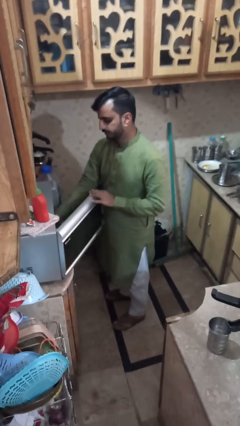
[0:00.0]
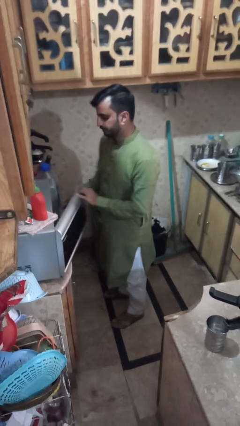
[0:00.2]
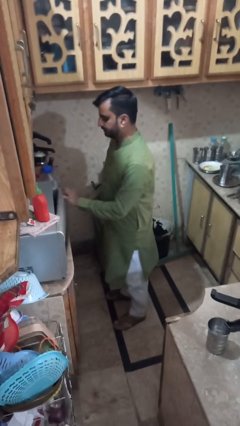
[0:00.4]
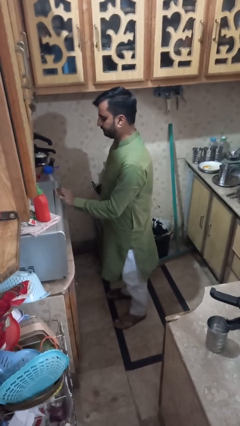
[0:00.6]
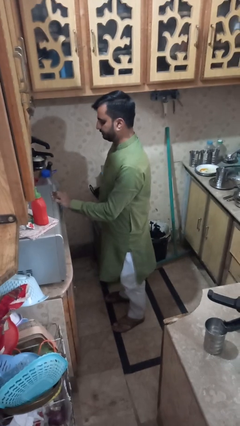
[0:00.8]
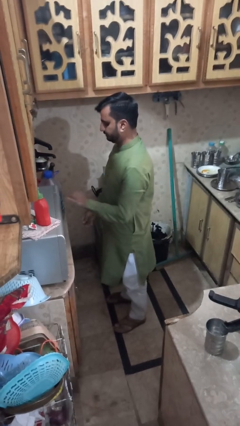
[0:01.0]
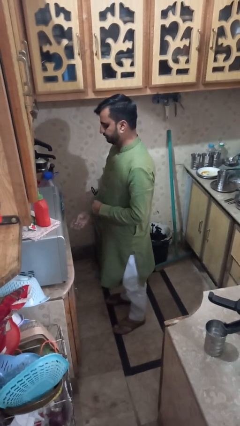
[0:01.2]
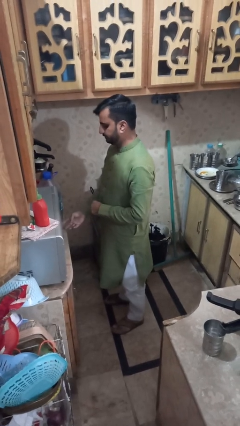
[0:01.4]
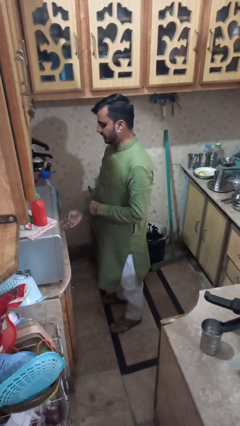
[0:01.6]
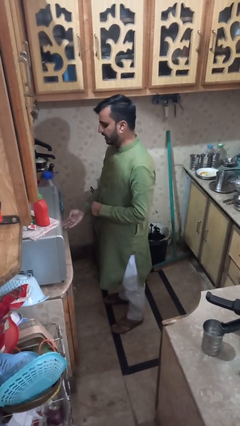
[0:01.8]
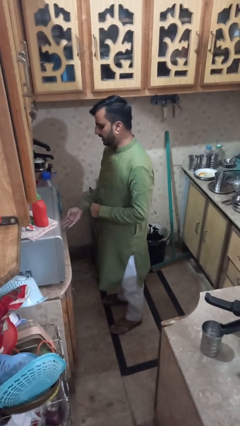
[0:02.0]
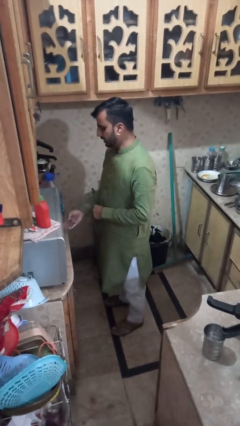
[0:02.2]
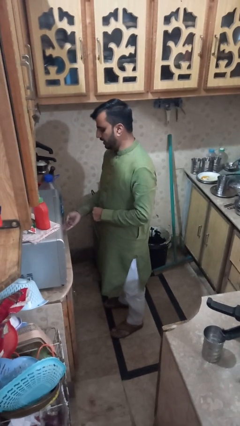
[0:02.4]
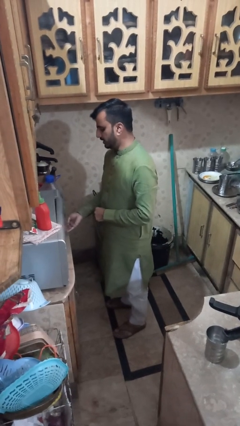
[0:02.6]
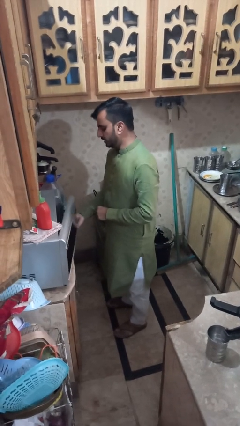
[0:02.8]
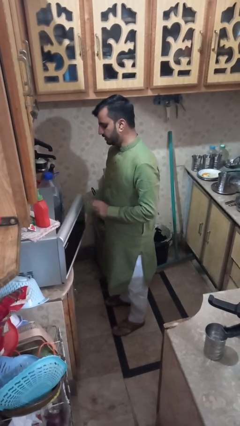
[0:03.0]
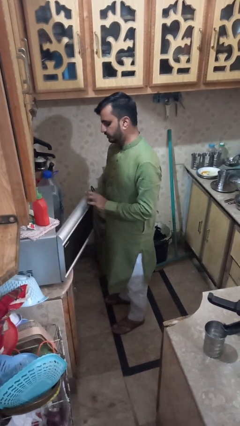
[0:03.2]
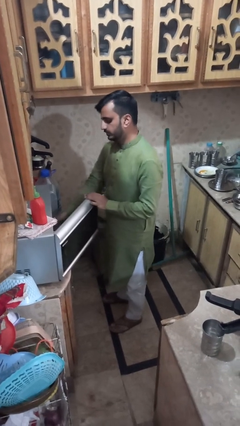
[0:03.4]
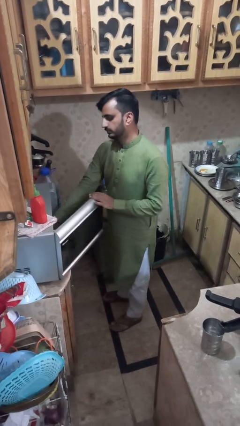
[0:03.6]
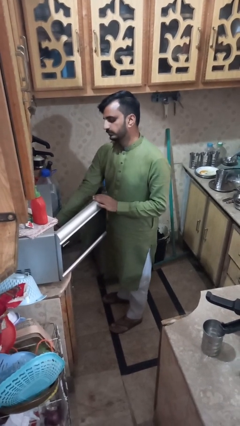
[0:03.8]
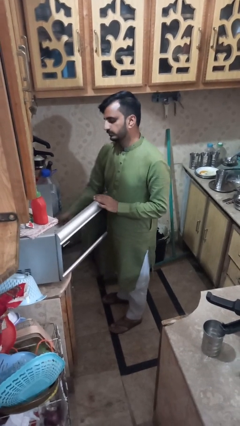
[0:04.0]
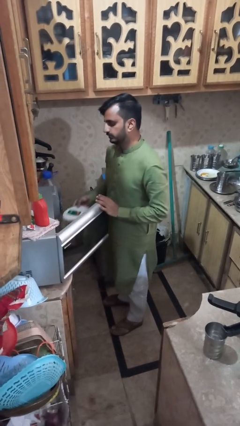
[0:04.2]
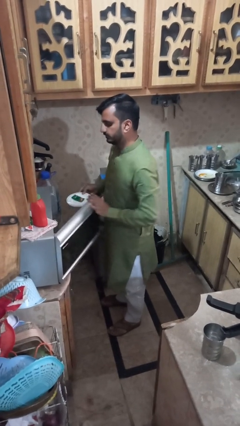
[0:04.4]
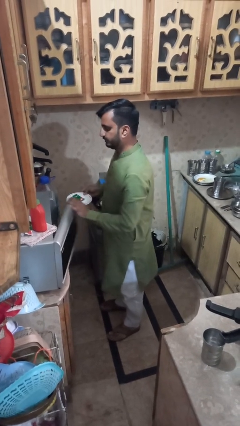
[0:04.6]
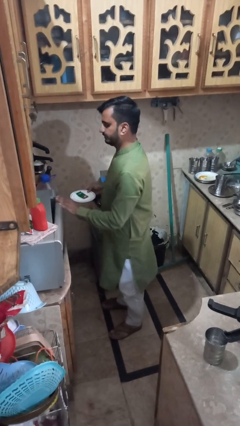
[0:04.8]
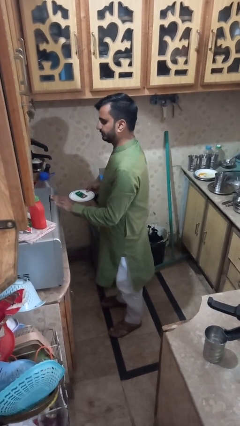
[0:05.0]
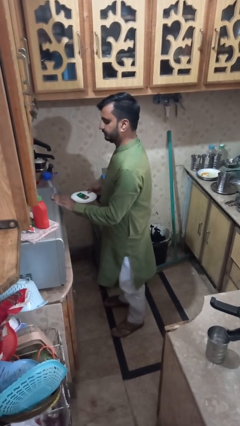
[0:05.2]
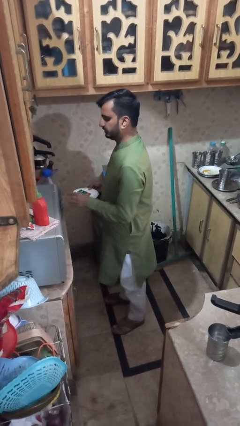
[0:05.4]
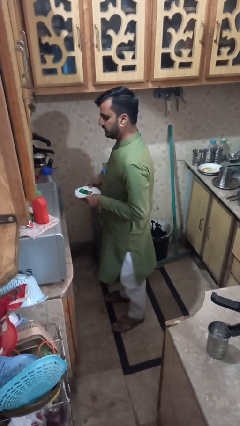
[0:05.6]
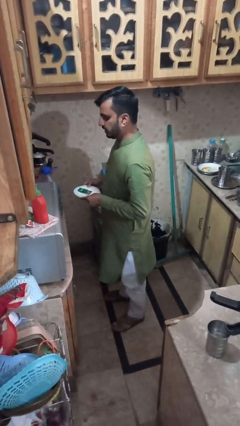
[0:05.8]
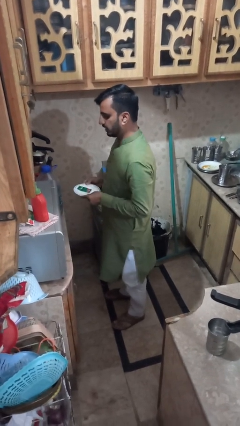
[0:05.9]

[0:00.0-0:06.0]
person takes object from microwave

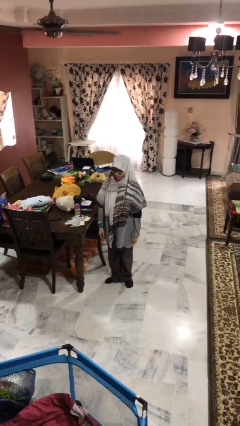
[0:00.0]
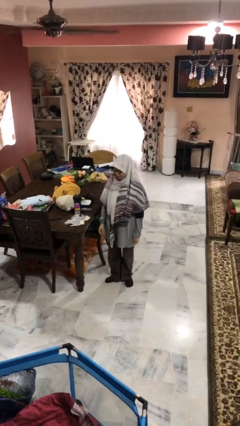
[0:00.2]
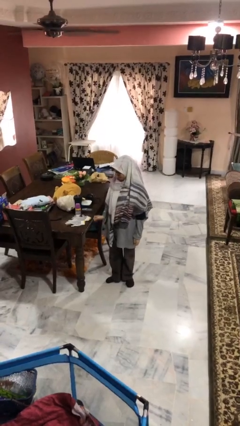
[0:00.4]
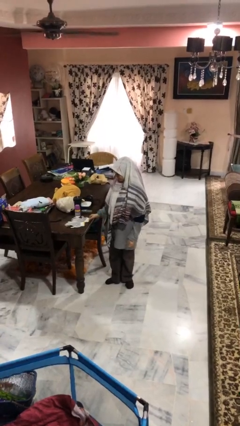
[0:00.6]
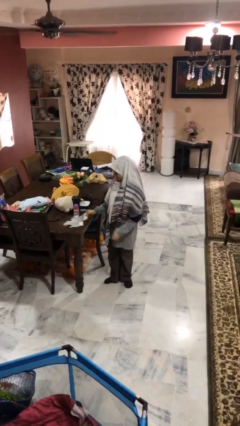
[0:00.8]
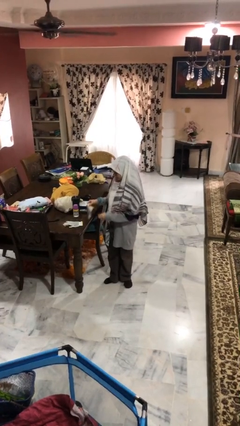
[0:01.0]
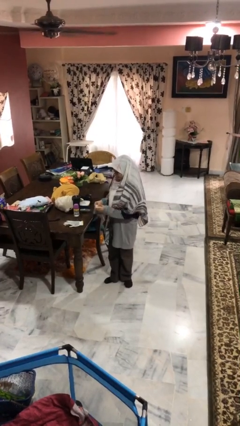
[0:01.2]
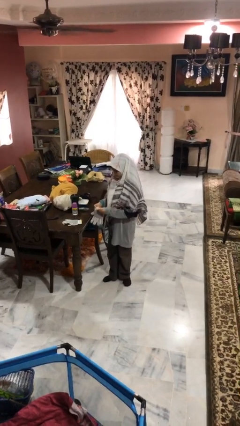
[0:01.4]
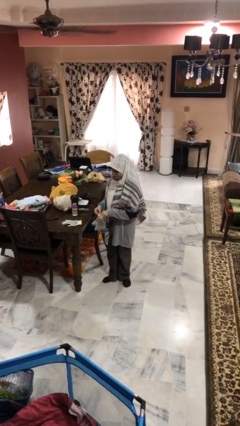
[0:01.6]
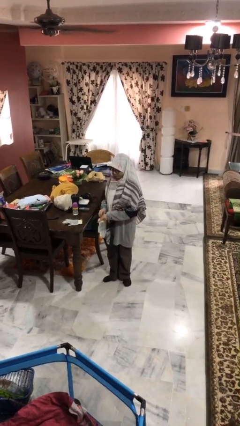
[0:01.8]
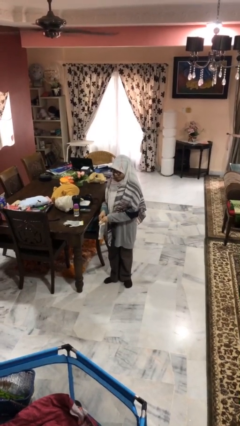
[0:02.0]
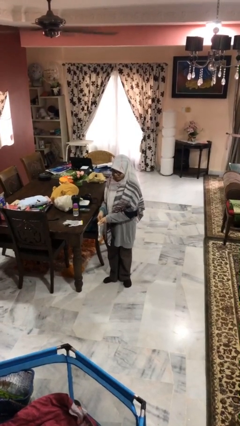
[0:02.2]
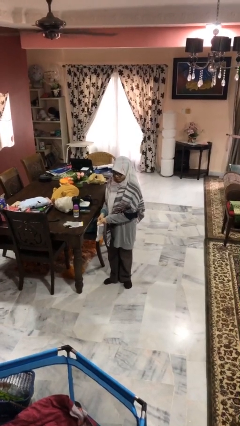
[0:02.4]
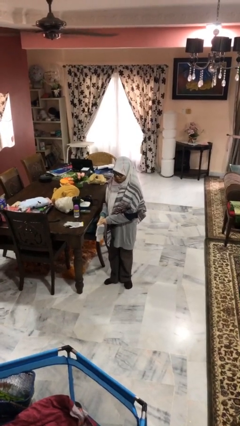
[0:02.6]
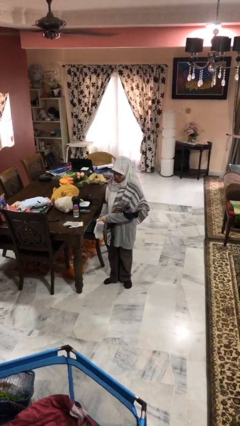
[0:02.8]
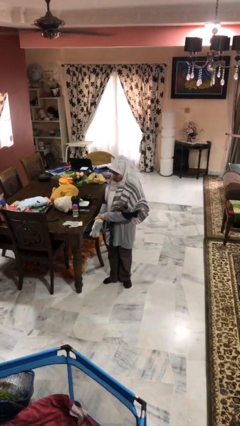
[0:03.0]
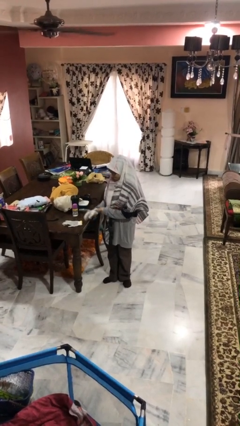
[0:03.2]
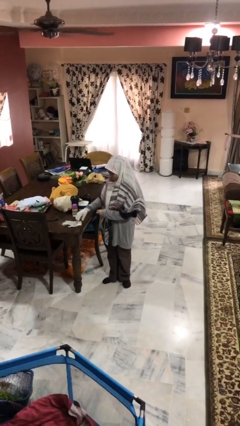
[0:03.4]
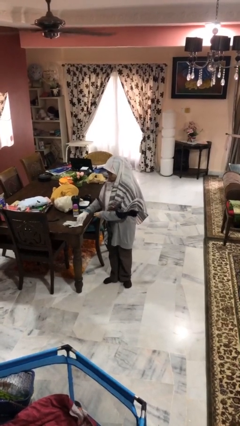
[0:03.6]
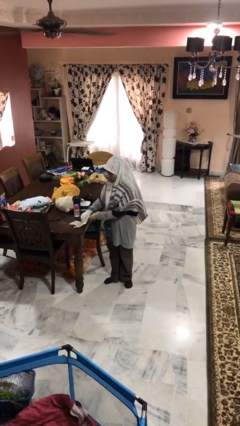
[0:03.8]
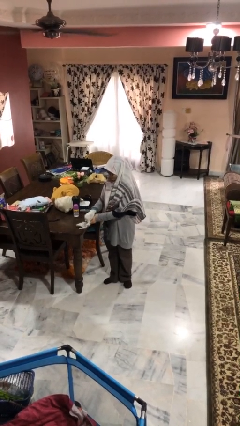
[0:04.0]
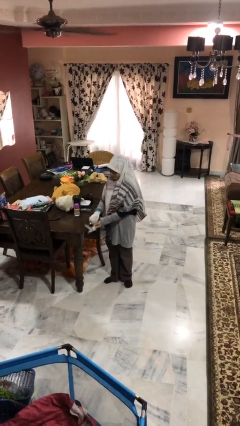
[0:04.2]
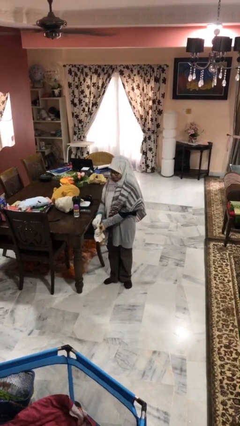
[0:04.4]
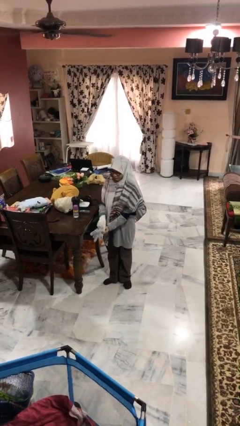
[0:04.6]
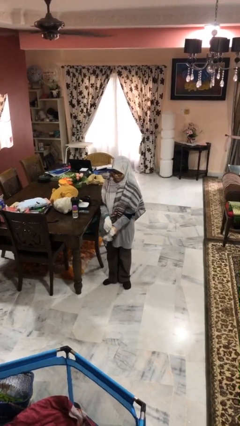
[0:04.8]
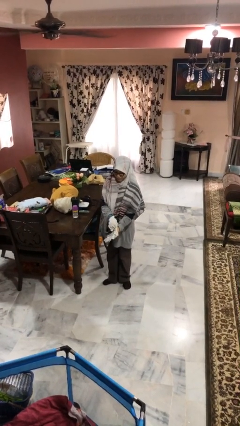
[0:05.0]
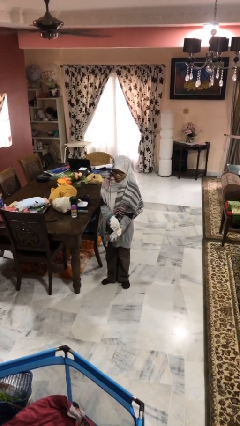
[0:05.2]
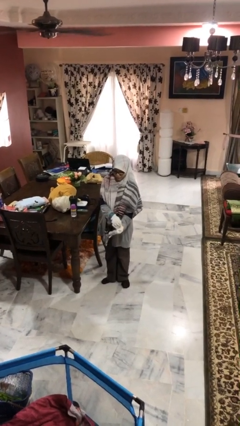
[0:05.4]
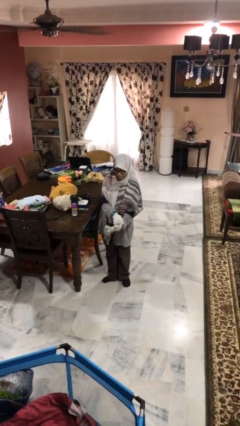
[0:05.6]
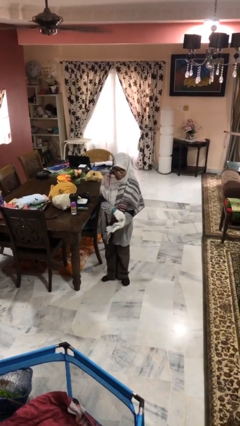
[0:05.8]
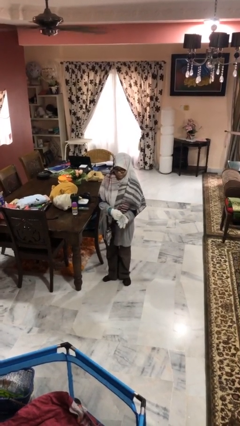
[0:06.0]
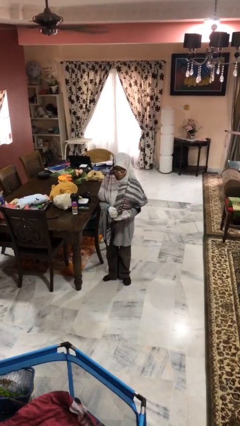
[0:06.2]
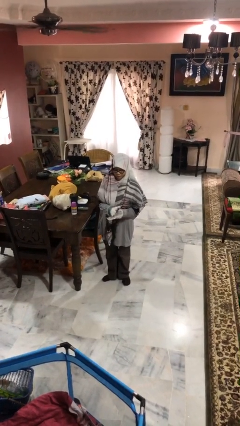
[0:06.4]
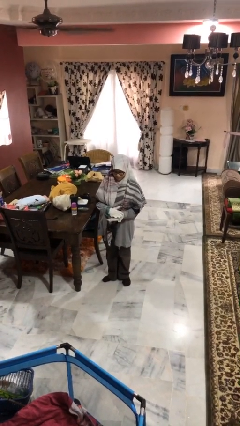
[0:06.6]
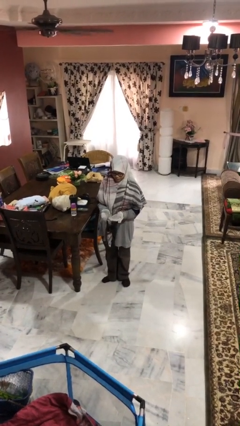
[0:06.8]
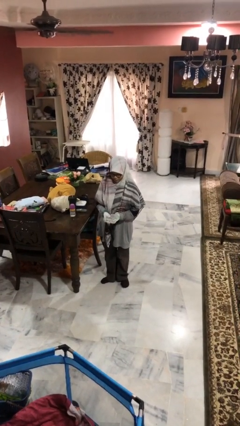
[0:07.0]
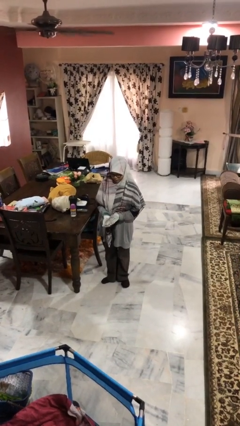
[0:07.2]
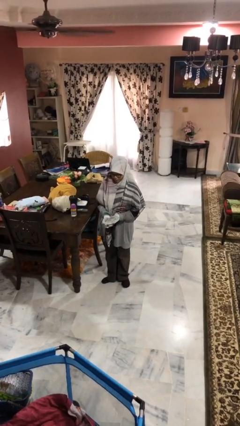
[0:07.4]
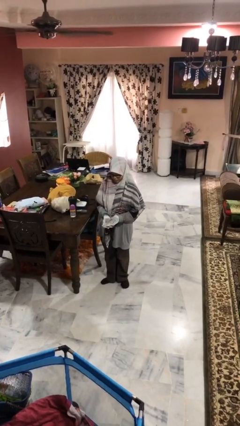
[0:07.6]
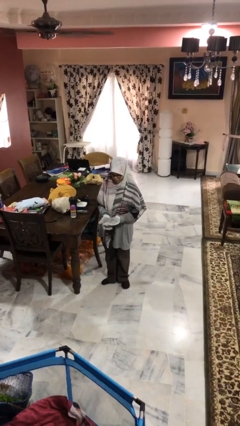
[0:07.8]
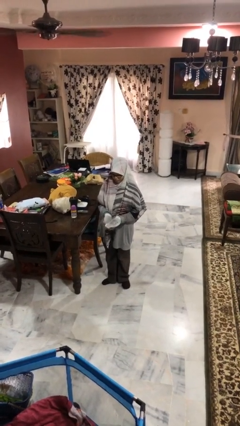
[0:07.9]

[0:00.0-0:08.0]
person puts on gloves

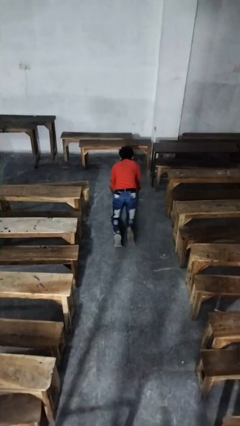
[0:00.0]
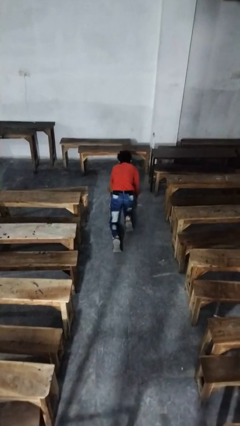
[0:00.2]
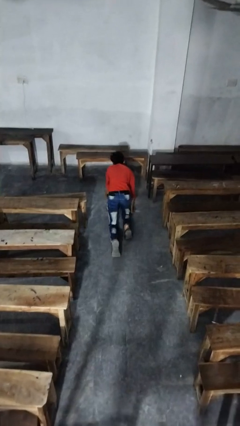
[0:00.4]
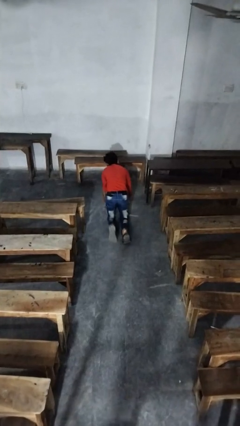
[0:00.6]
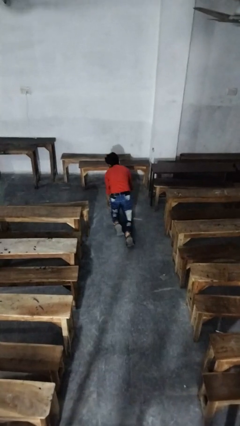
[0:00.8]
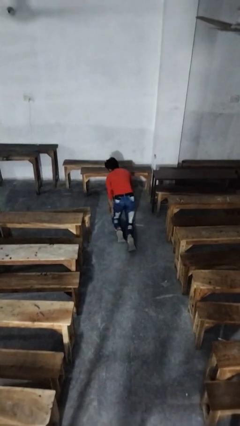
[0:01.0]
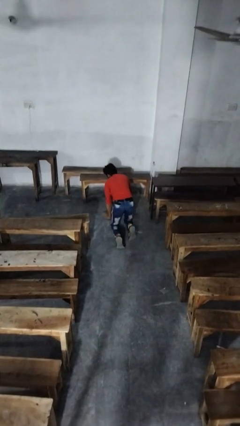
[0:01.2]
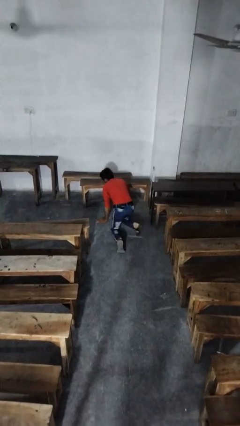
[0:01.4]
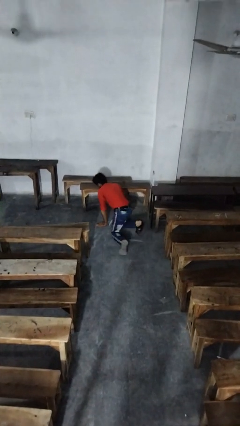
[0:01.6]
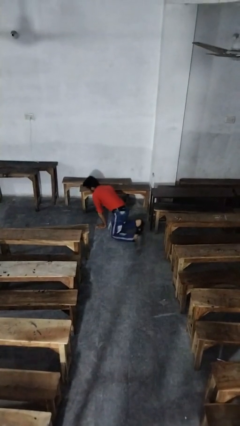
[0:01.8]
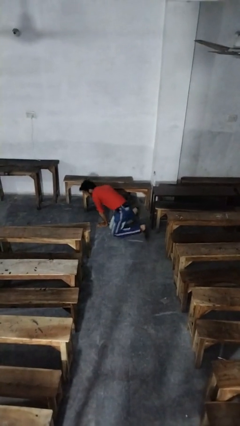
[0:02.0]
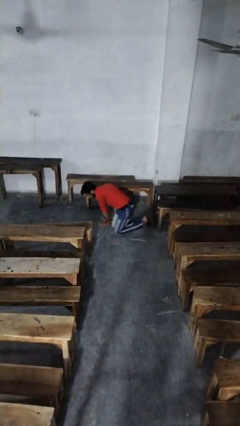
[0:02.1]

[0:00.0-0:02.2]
person crawls

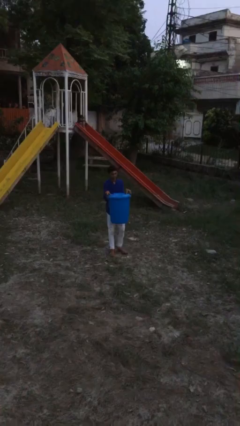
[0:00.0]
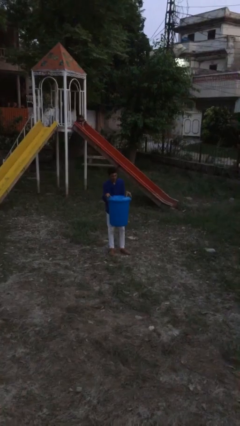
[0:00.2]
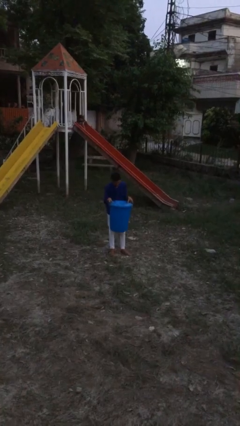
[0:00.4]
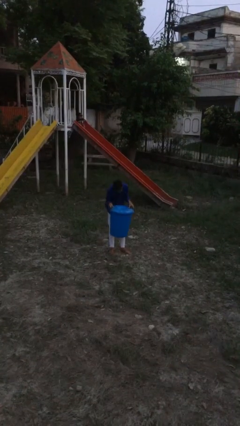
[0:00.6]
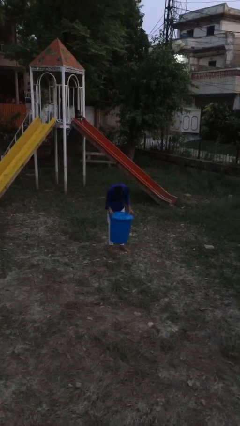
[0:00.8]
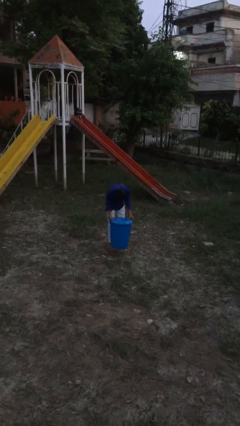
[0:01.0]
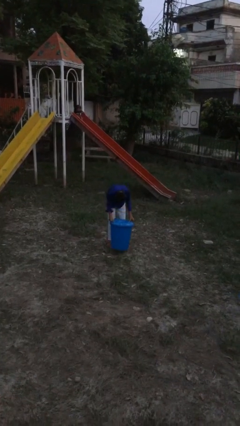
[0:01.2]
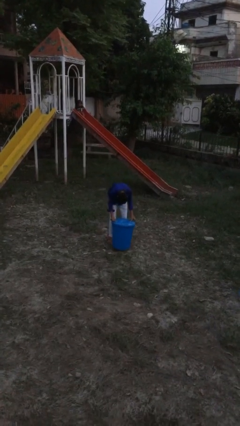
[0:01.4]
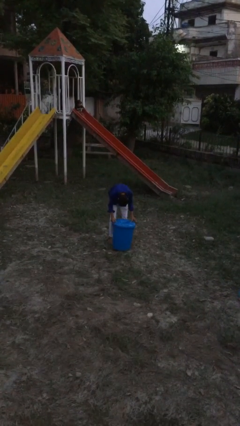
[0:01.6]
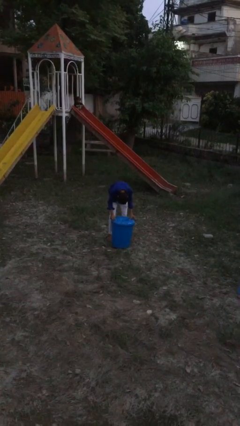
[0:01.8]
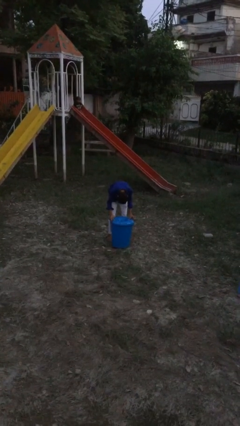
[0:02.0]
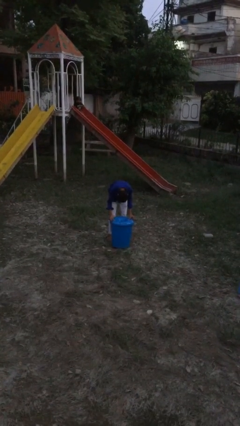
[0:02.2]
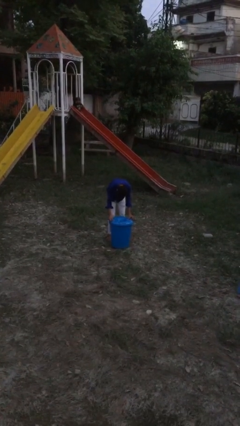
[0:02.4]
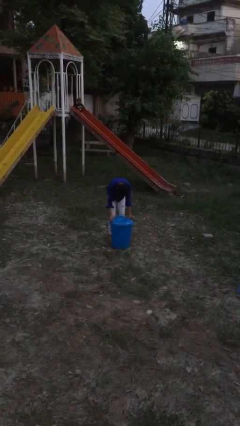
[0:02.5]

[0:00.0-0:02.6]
person puts down object on floor
